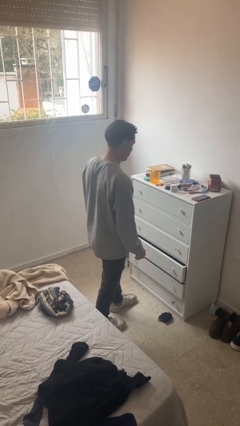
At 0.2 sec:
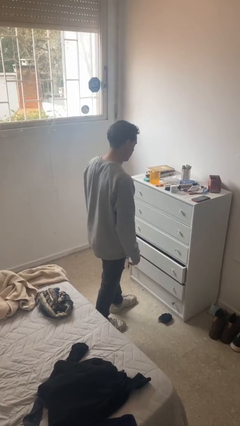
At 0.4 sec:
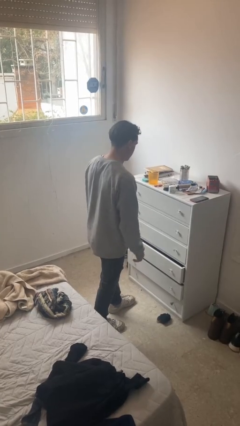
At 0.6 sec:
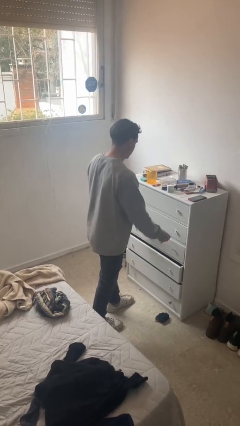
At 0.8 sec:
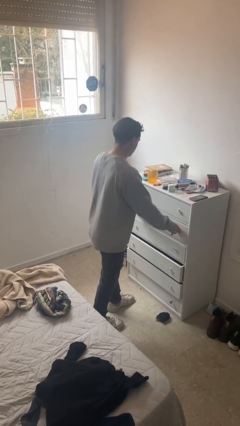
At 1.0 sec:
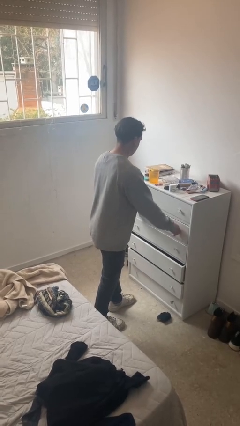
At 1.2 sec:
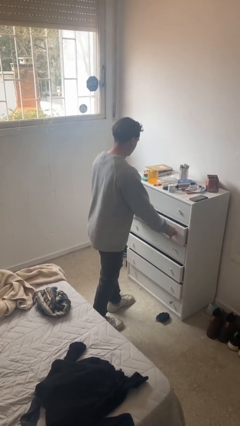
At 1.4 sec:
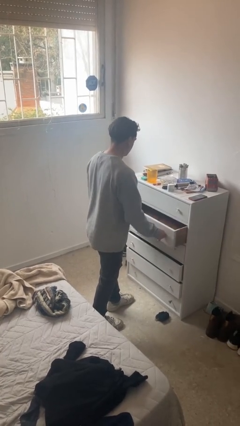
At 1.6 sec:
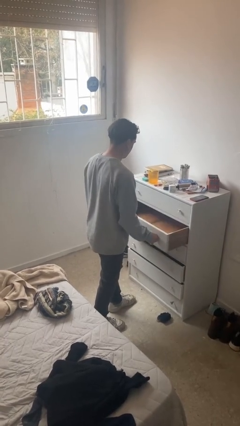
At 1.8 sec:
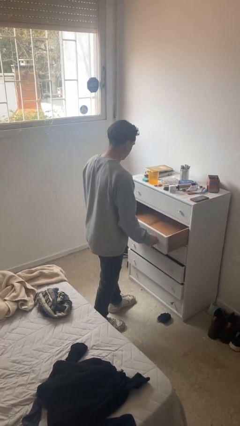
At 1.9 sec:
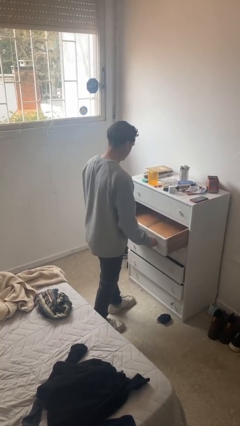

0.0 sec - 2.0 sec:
person opens dresser drawer

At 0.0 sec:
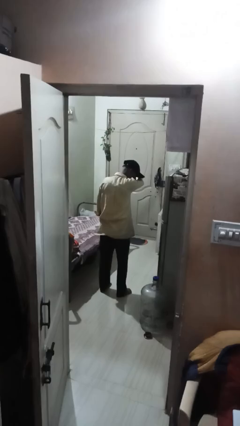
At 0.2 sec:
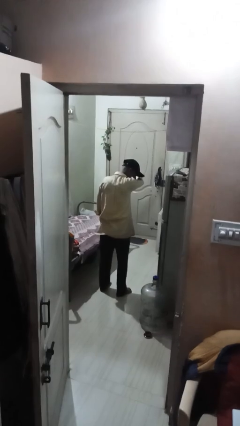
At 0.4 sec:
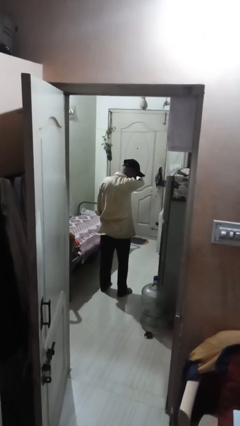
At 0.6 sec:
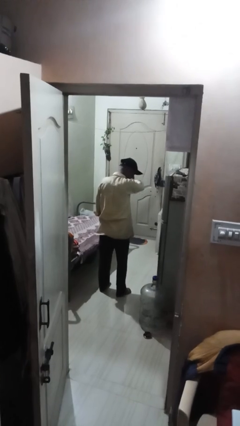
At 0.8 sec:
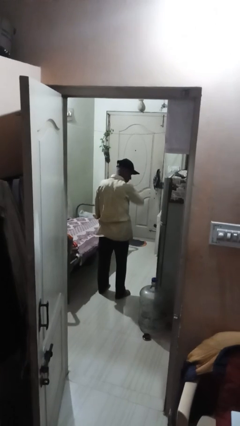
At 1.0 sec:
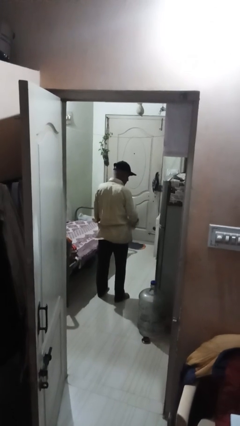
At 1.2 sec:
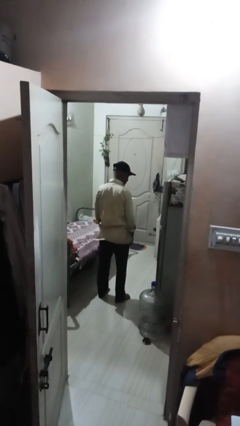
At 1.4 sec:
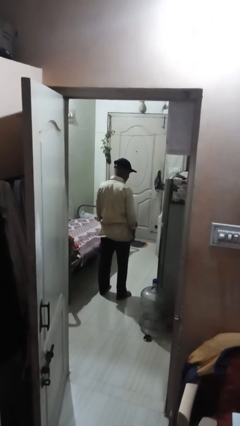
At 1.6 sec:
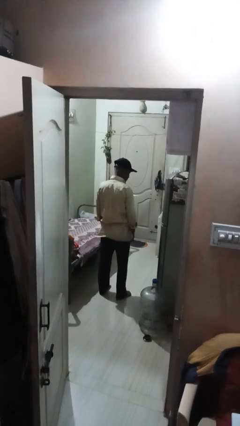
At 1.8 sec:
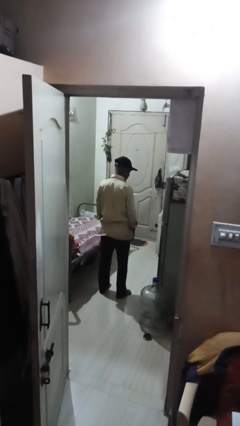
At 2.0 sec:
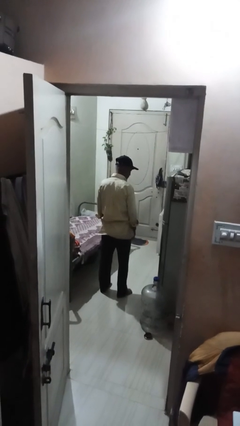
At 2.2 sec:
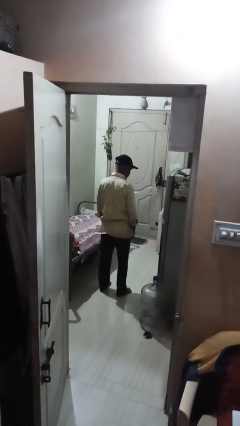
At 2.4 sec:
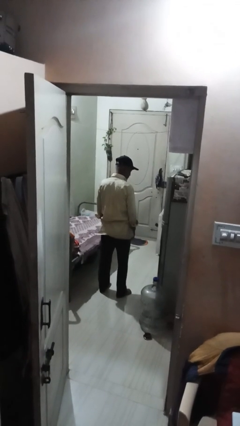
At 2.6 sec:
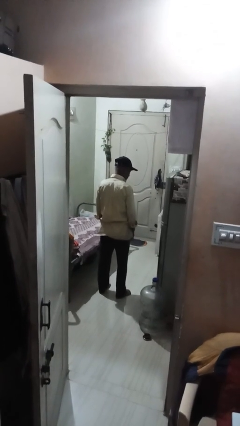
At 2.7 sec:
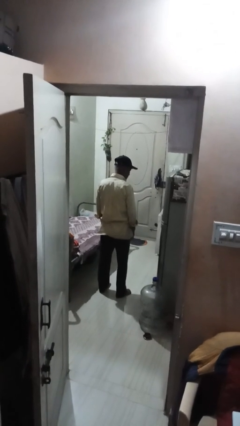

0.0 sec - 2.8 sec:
person shrugs

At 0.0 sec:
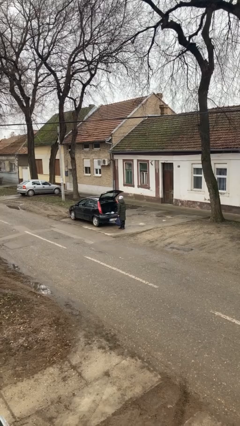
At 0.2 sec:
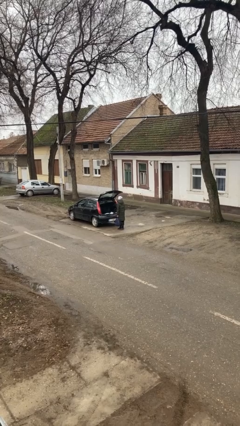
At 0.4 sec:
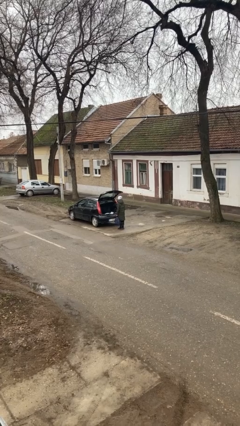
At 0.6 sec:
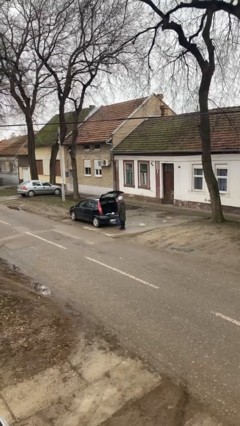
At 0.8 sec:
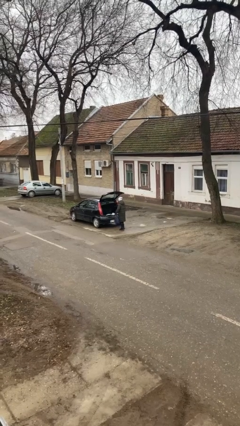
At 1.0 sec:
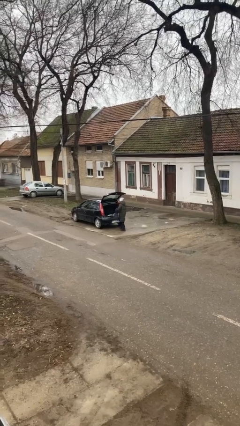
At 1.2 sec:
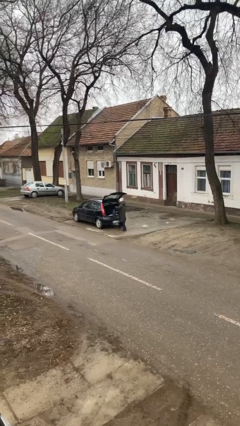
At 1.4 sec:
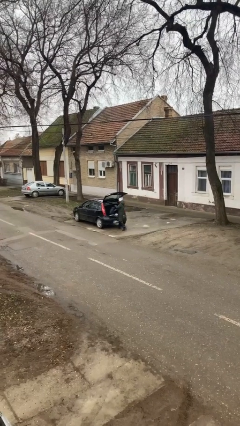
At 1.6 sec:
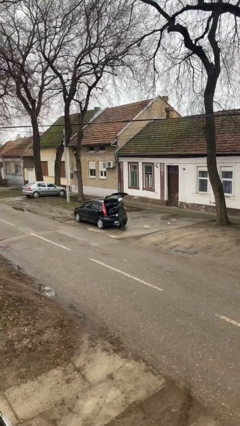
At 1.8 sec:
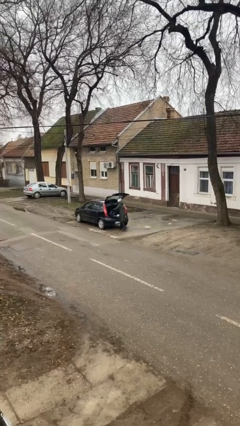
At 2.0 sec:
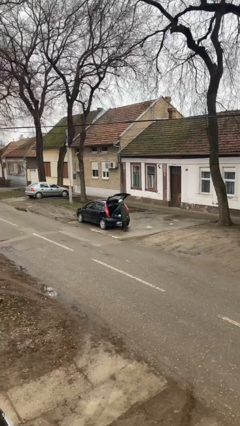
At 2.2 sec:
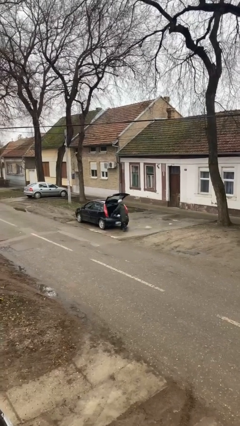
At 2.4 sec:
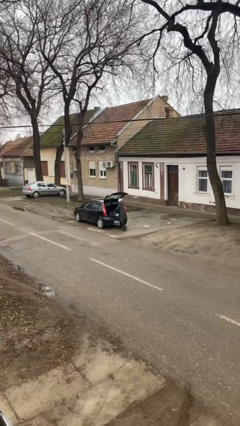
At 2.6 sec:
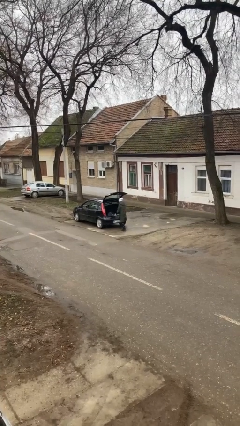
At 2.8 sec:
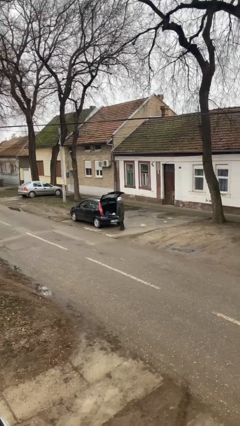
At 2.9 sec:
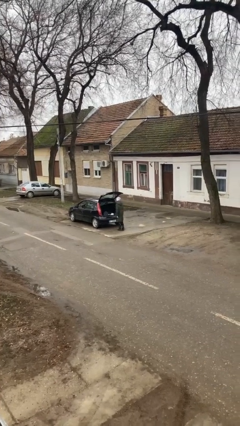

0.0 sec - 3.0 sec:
person loads car

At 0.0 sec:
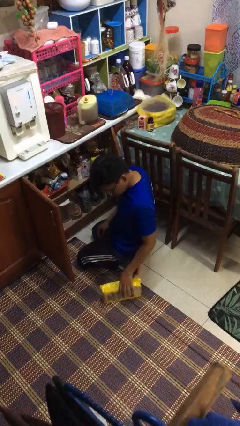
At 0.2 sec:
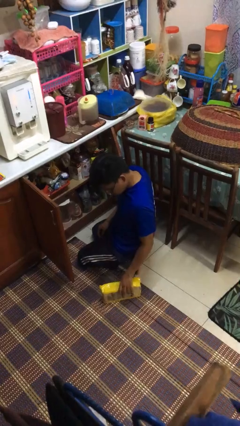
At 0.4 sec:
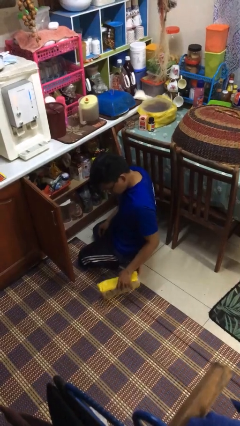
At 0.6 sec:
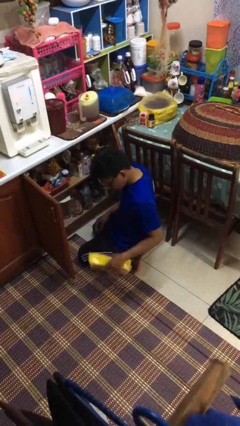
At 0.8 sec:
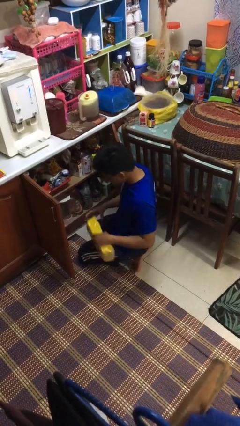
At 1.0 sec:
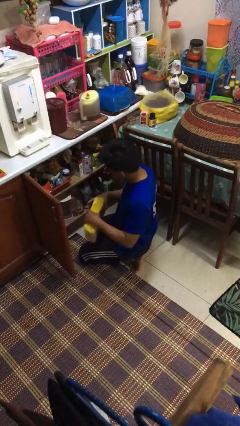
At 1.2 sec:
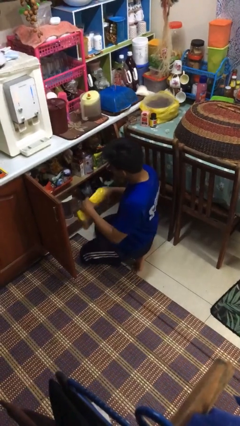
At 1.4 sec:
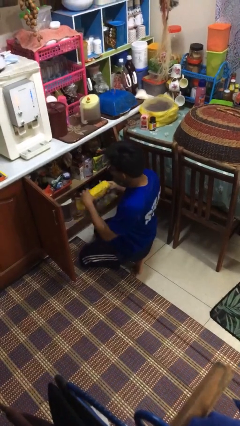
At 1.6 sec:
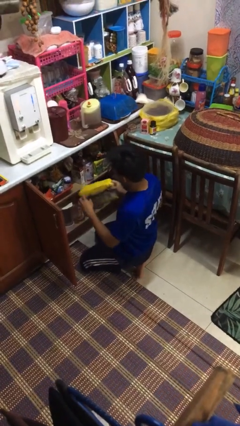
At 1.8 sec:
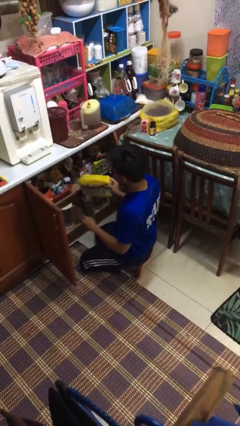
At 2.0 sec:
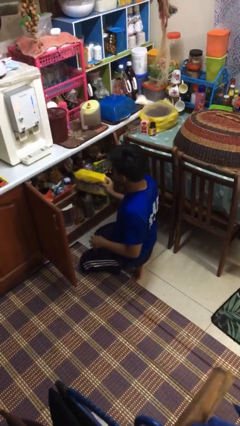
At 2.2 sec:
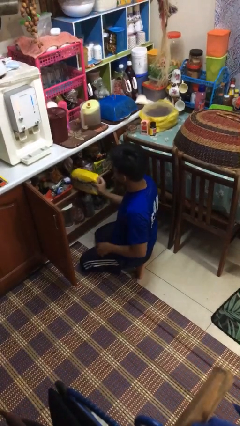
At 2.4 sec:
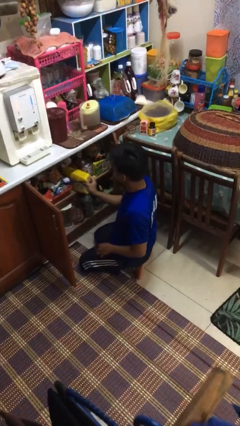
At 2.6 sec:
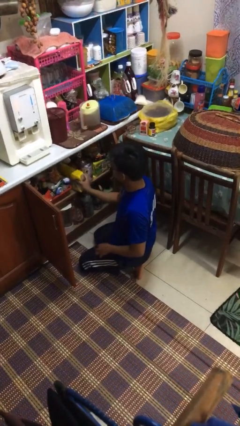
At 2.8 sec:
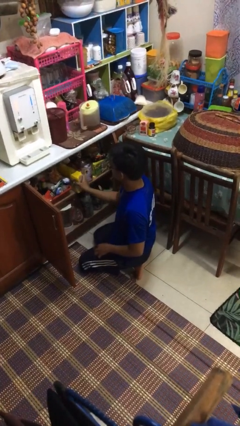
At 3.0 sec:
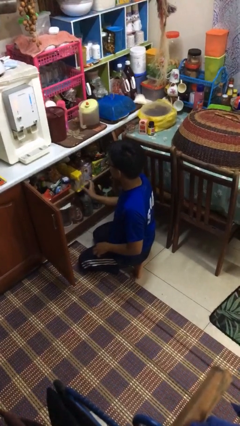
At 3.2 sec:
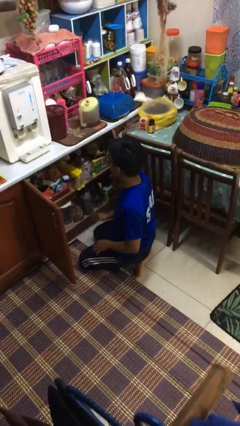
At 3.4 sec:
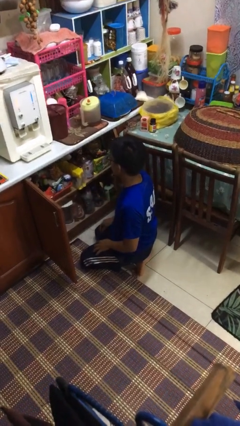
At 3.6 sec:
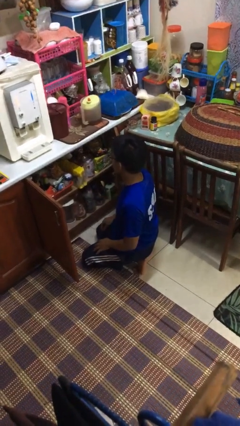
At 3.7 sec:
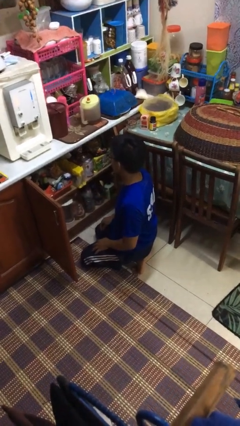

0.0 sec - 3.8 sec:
person puts object in cabinet

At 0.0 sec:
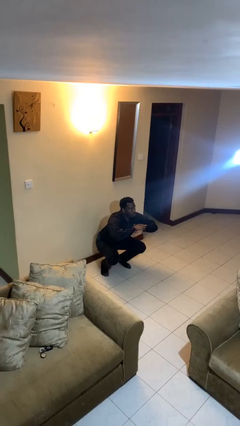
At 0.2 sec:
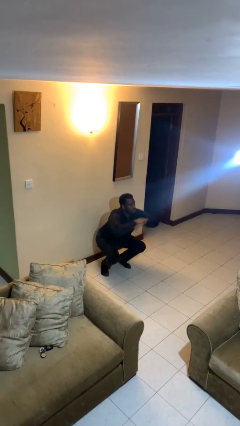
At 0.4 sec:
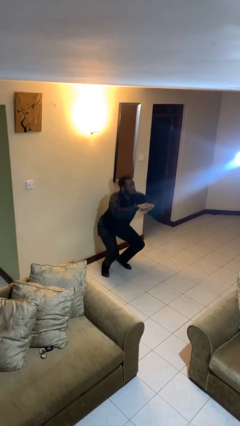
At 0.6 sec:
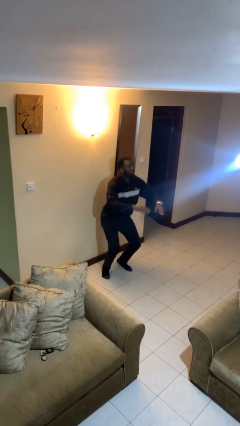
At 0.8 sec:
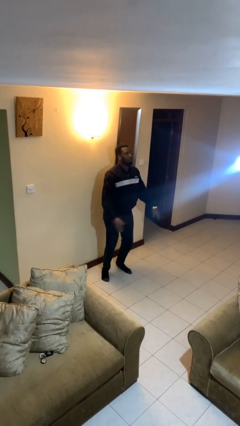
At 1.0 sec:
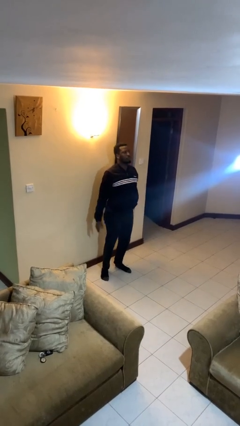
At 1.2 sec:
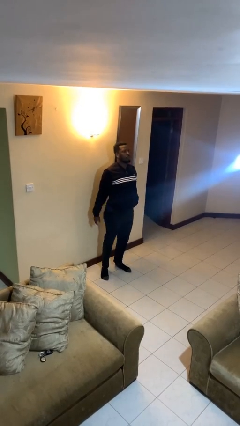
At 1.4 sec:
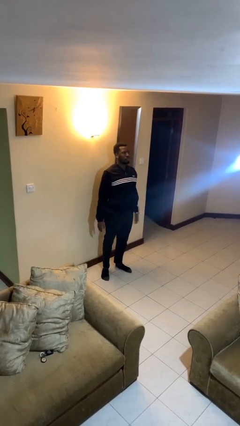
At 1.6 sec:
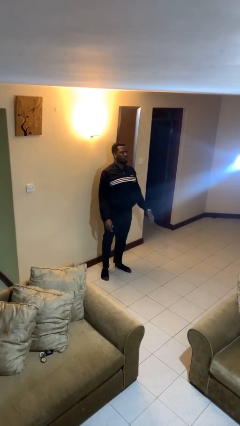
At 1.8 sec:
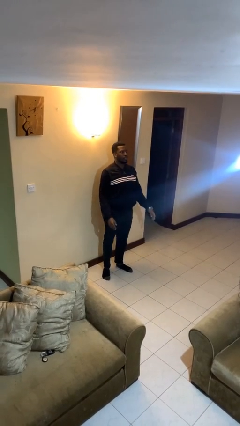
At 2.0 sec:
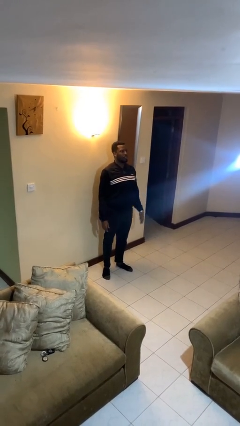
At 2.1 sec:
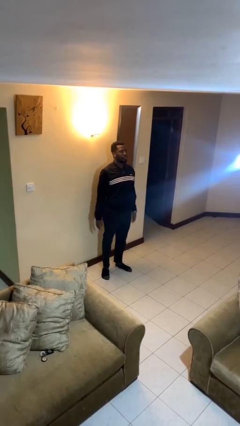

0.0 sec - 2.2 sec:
person stands up

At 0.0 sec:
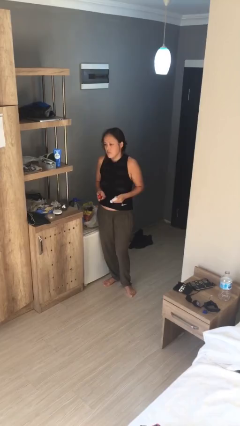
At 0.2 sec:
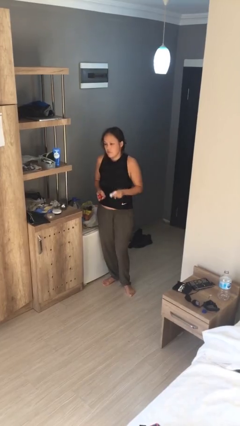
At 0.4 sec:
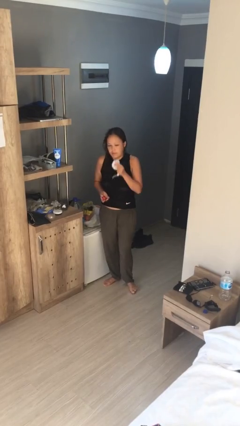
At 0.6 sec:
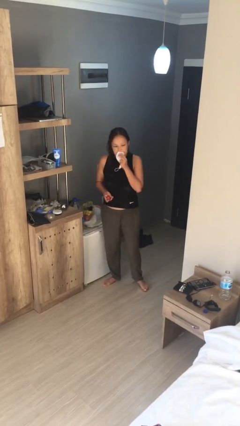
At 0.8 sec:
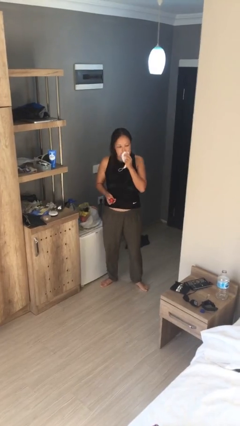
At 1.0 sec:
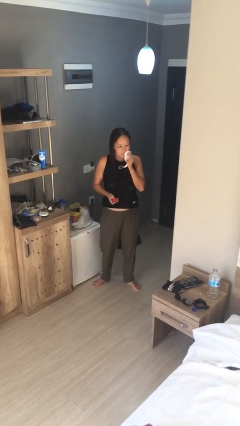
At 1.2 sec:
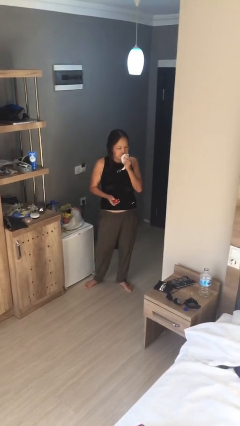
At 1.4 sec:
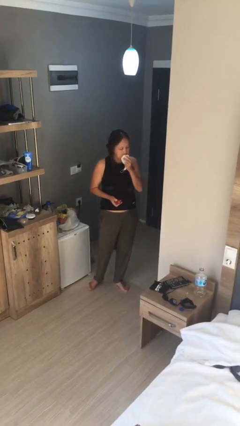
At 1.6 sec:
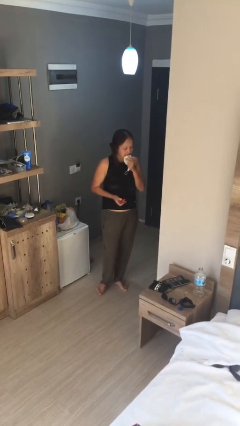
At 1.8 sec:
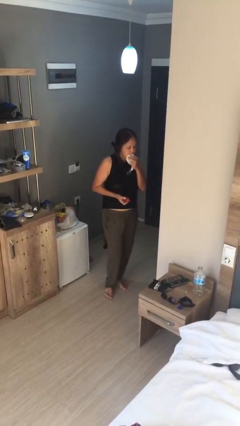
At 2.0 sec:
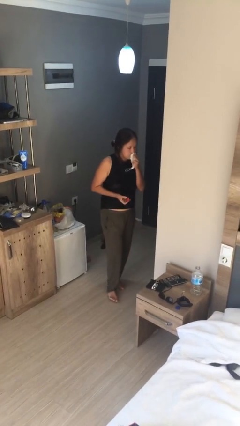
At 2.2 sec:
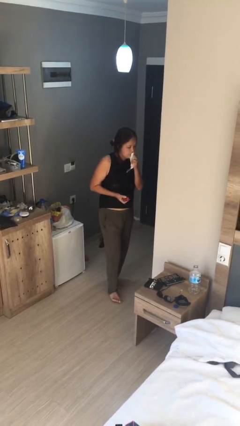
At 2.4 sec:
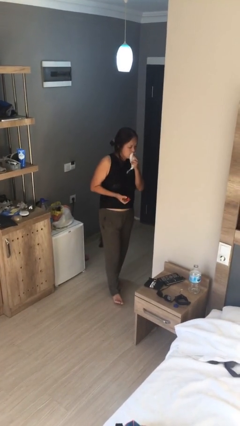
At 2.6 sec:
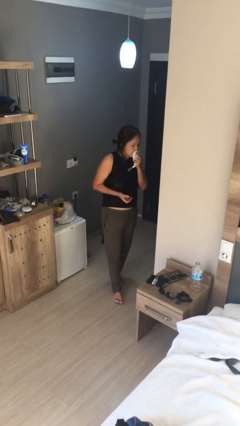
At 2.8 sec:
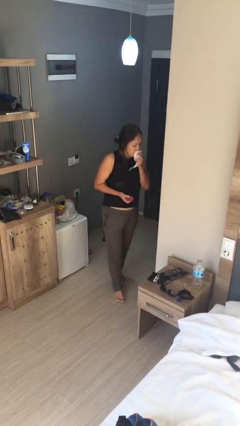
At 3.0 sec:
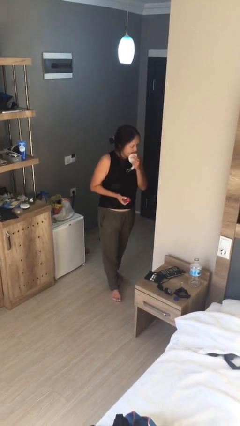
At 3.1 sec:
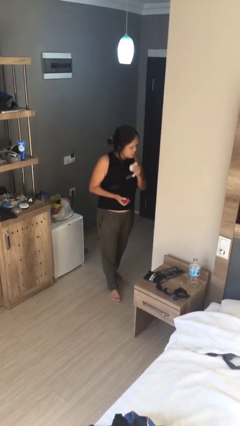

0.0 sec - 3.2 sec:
person wipes mouth with napkin

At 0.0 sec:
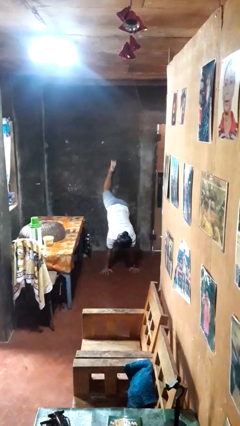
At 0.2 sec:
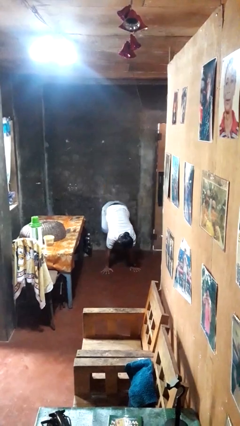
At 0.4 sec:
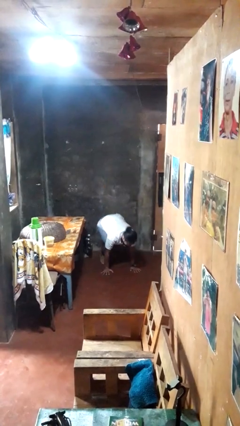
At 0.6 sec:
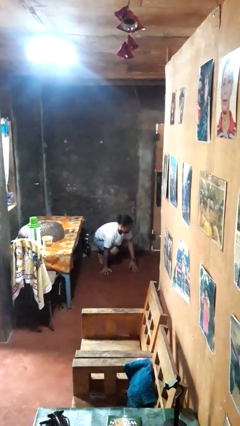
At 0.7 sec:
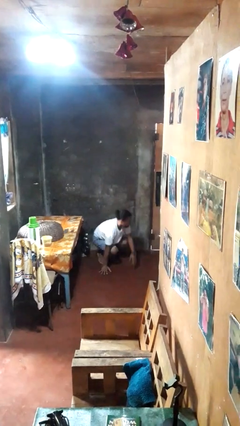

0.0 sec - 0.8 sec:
person handstand
